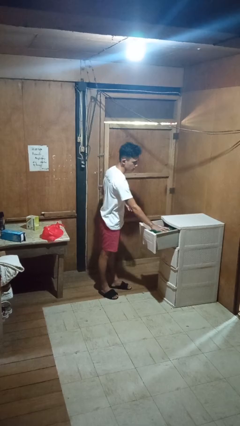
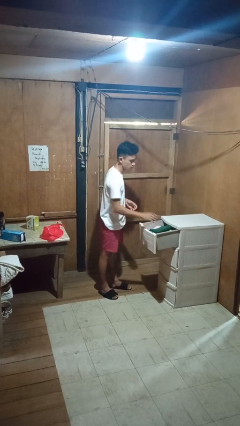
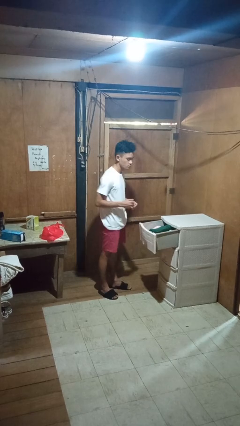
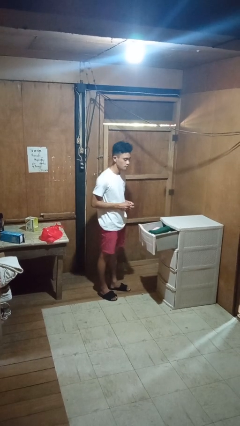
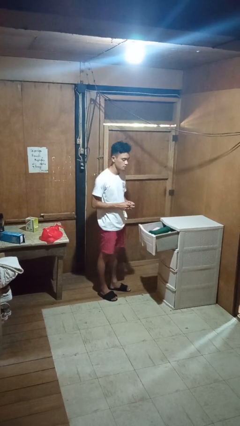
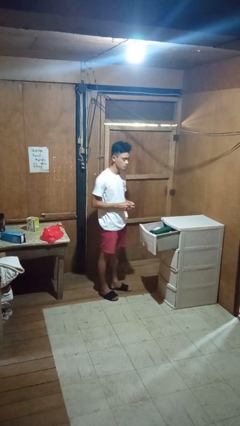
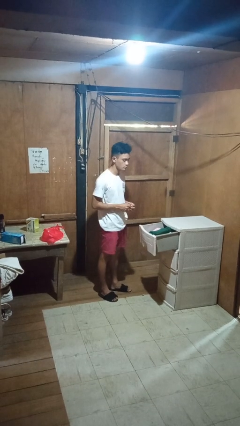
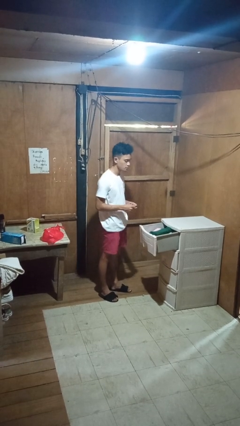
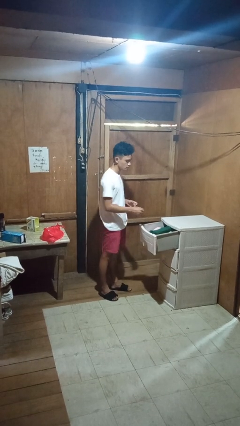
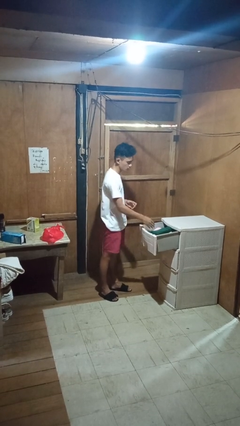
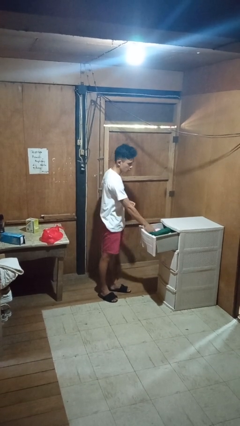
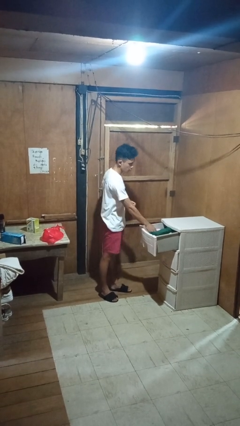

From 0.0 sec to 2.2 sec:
person puts clothes into dresser

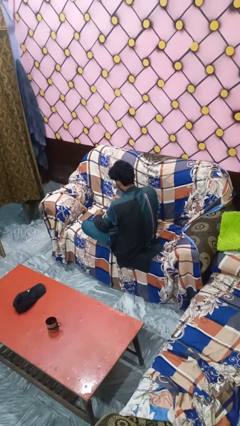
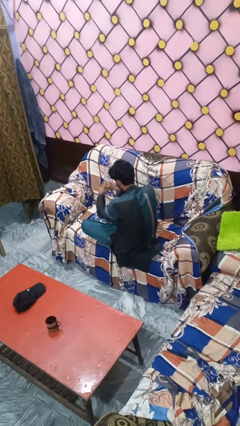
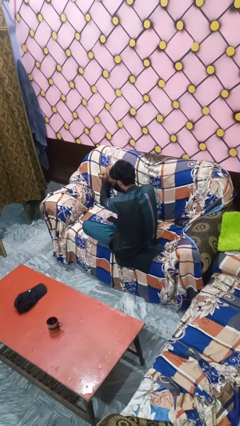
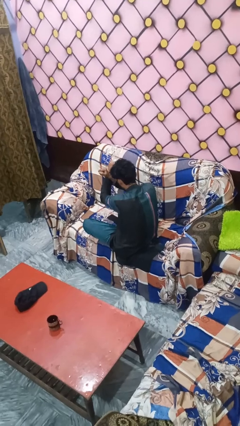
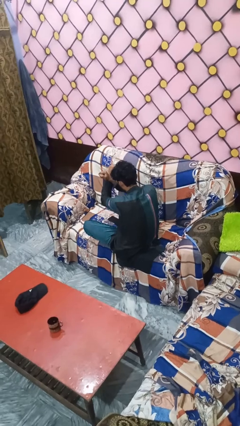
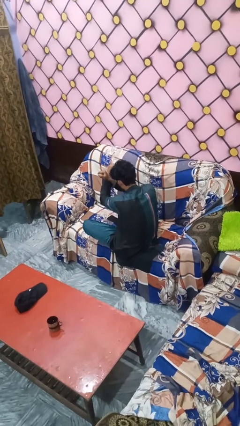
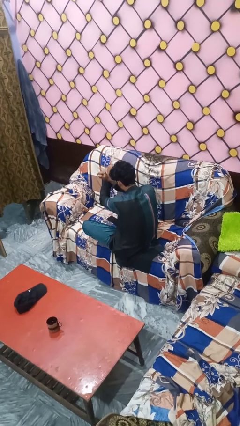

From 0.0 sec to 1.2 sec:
person gestures arms x

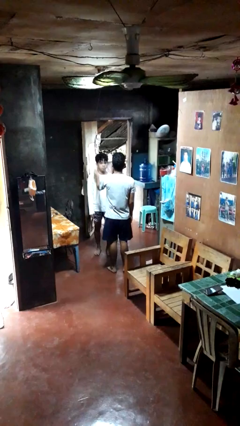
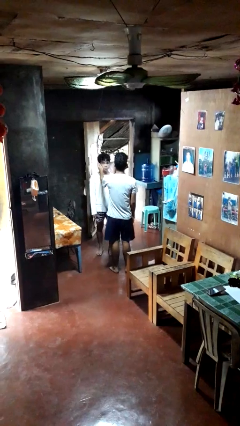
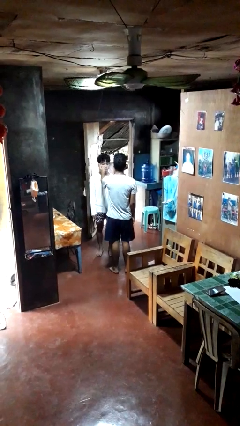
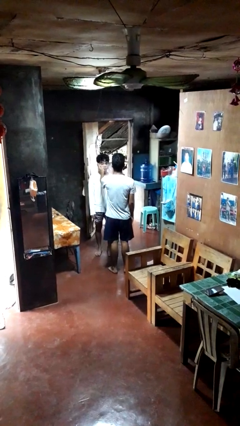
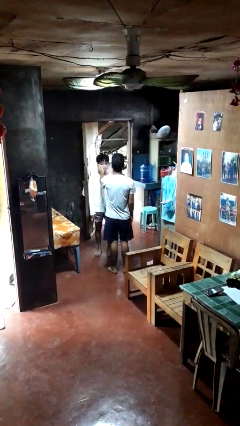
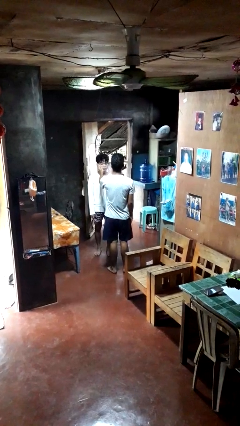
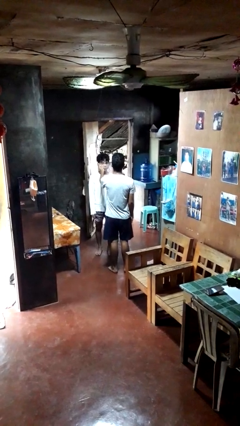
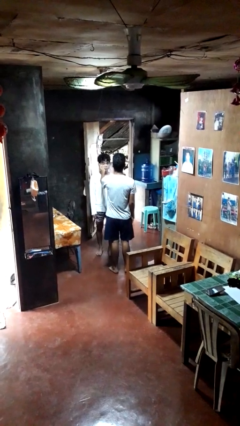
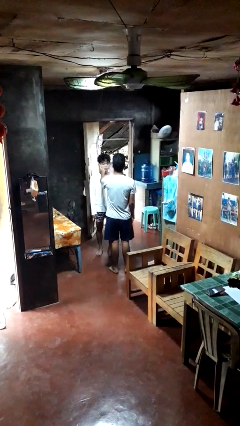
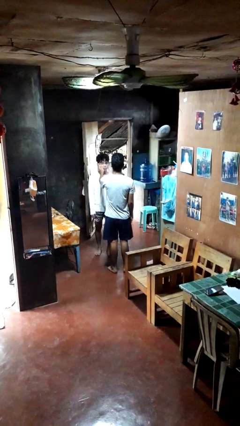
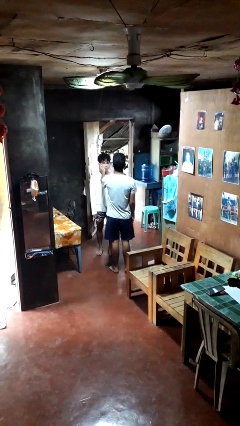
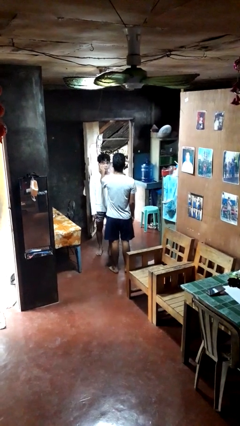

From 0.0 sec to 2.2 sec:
person touches face of person

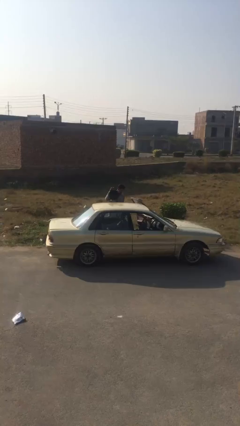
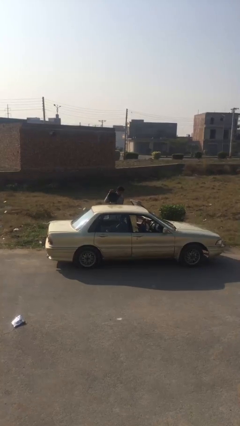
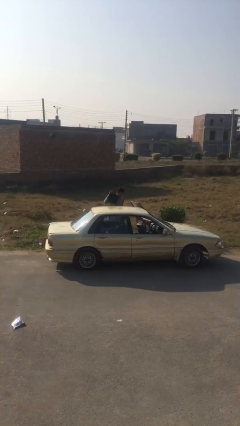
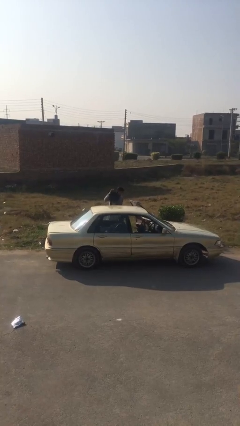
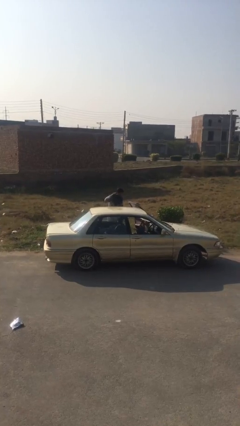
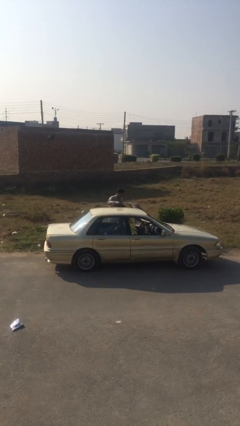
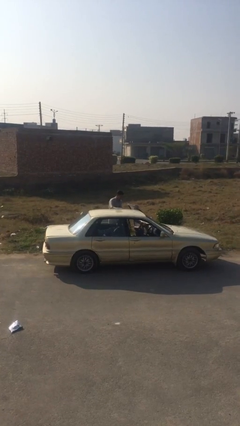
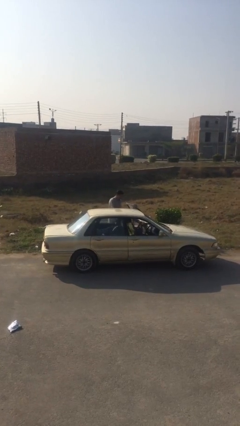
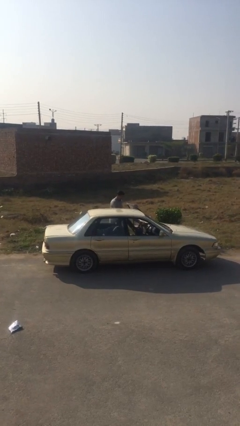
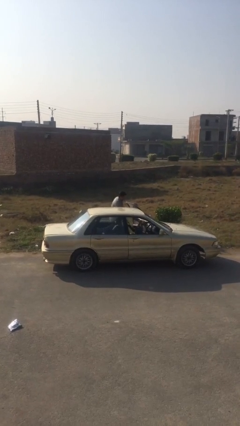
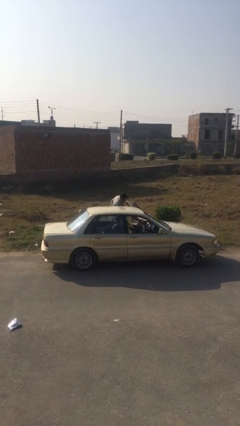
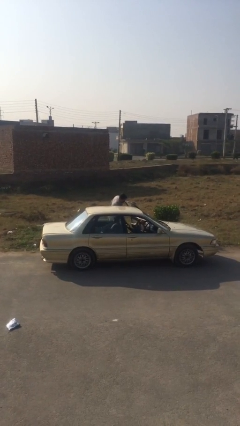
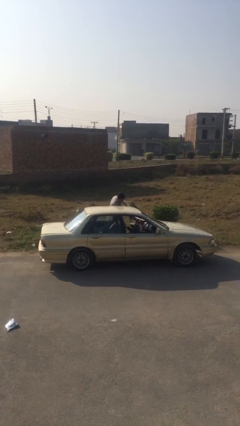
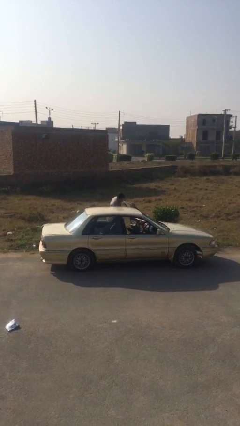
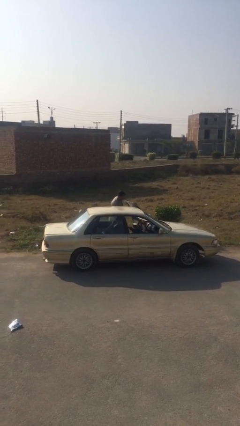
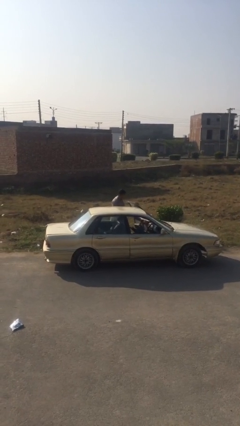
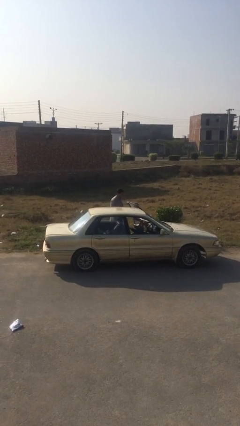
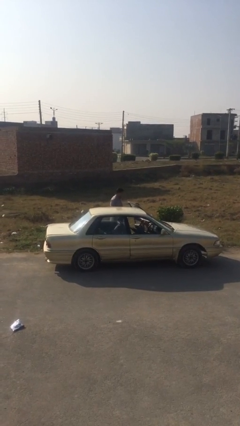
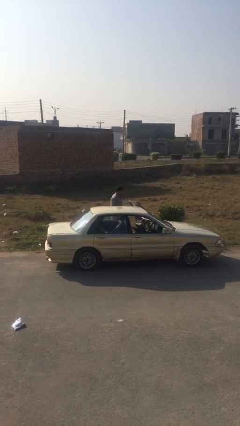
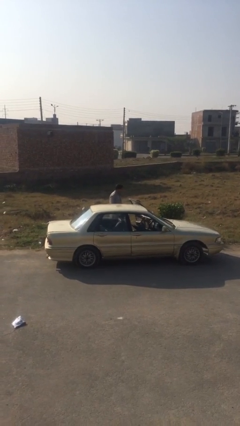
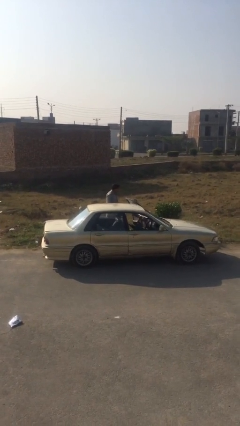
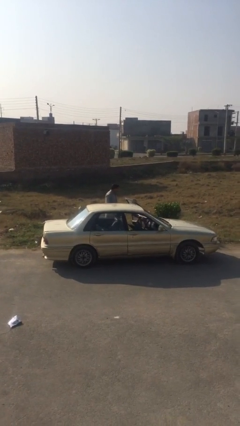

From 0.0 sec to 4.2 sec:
person loads car

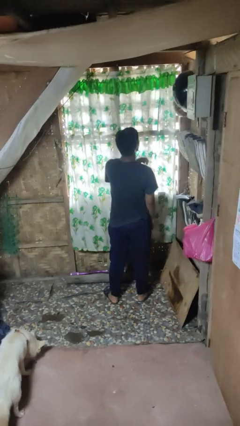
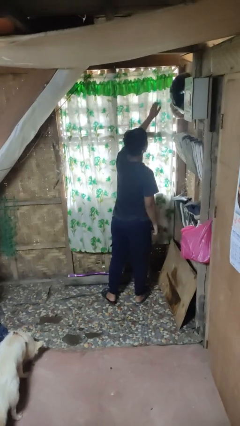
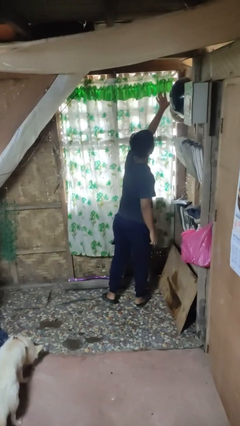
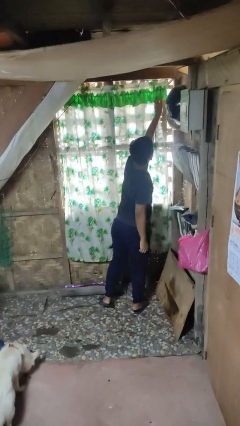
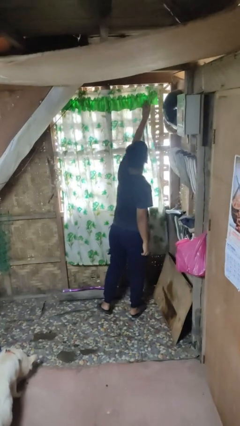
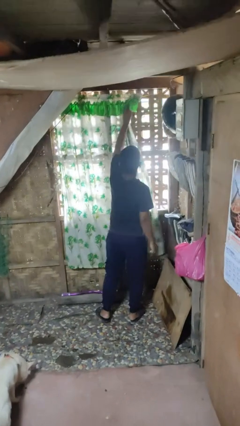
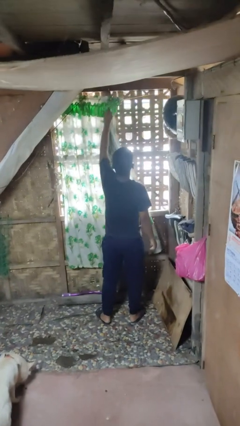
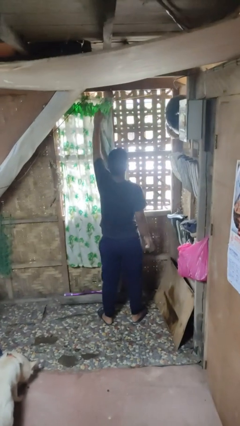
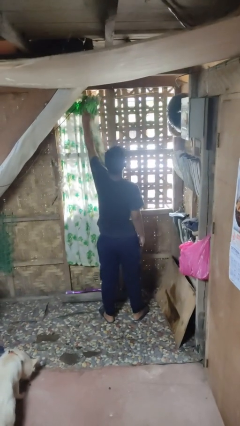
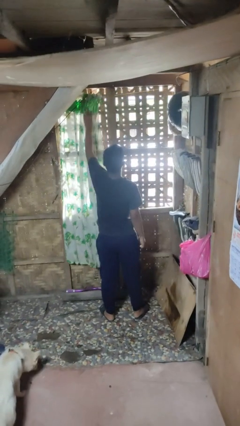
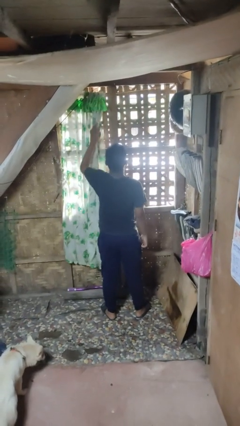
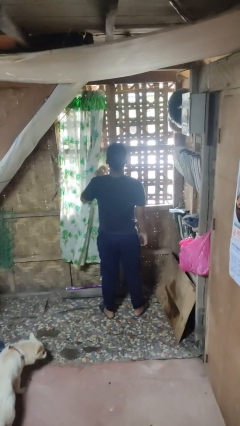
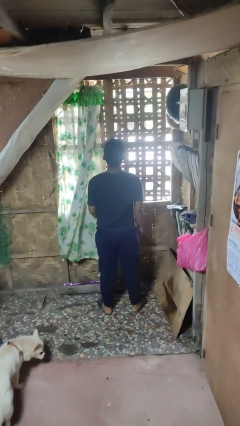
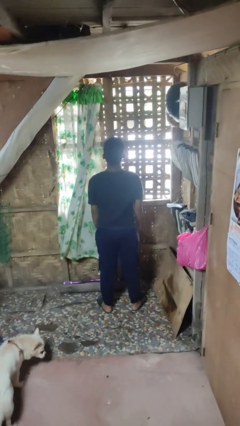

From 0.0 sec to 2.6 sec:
person opens curtains

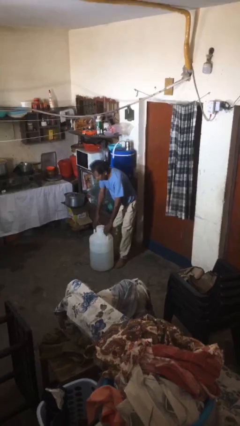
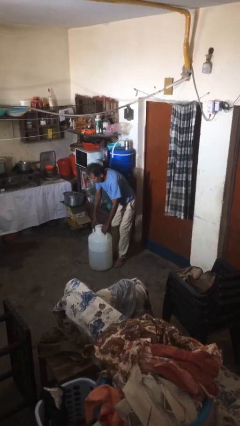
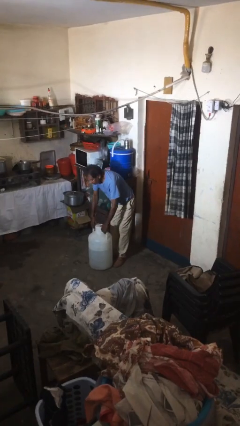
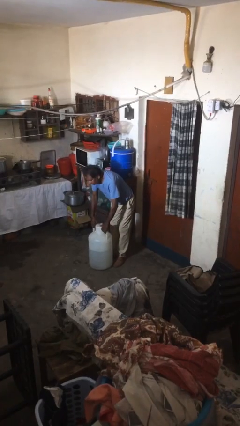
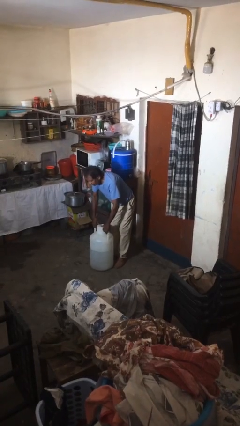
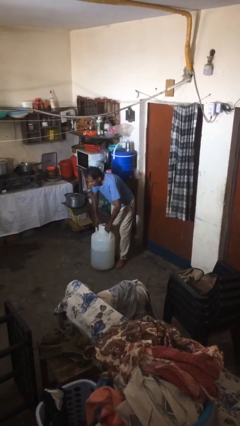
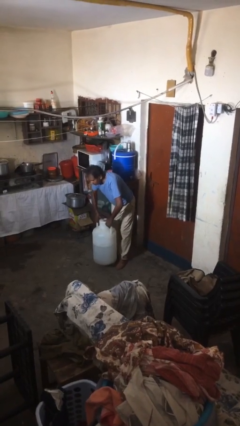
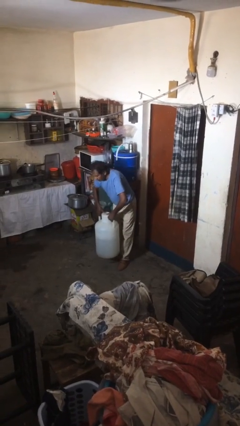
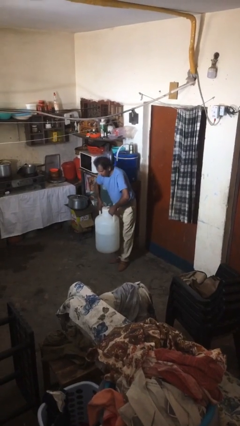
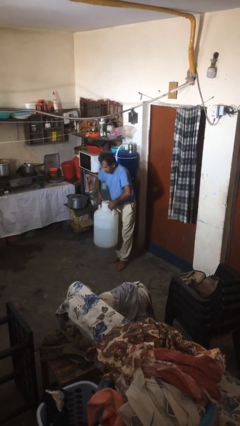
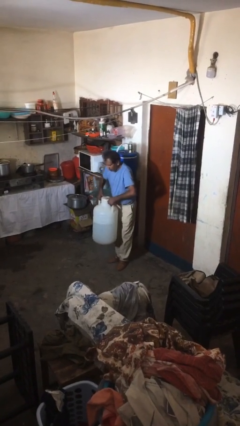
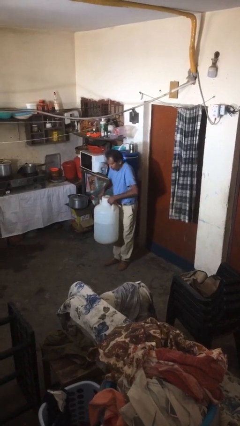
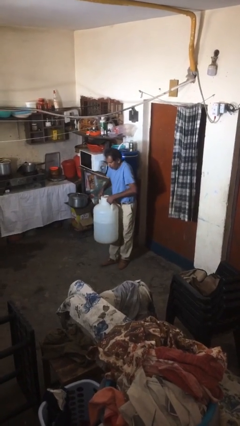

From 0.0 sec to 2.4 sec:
person picks up object from floor

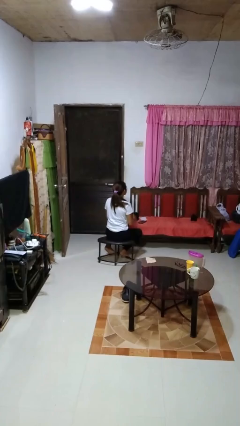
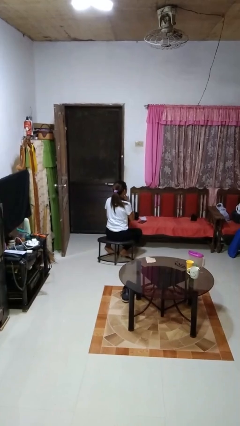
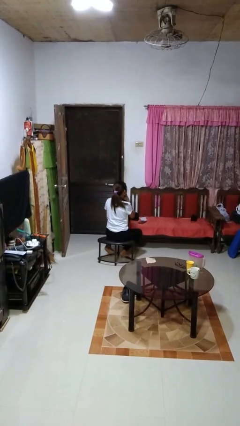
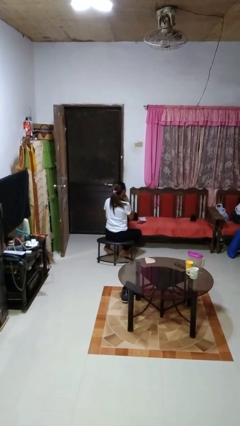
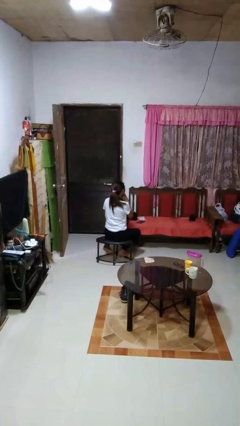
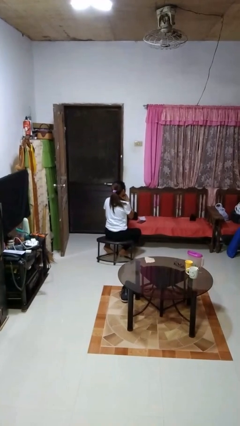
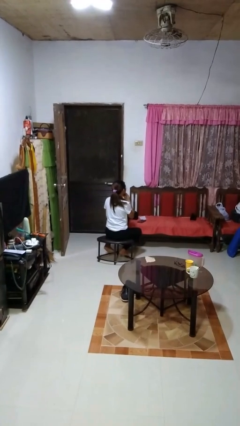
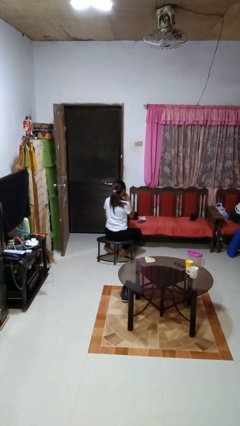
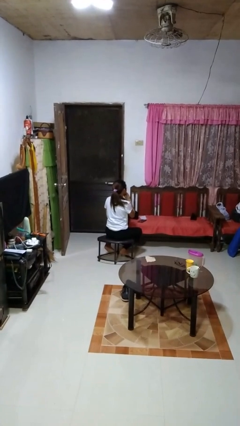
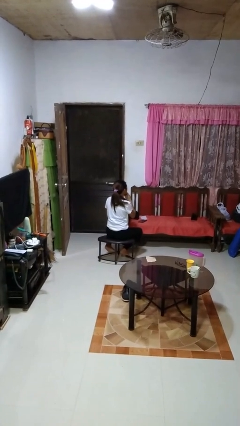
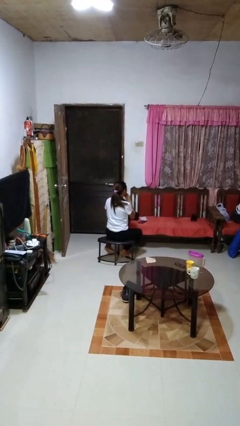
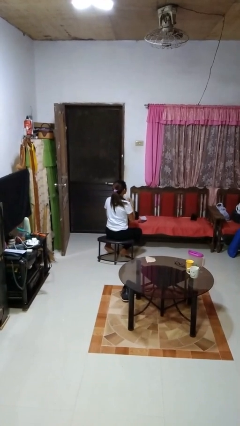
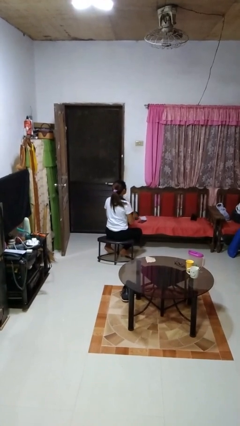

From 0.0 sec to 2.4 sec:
person strokes chin
